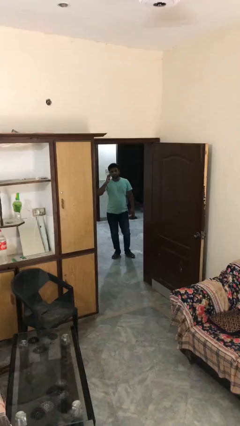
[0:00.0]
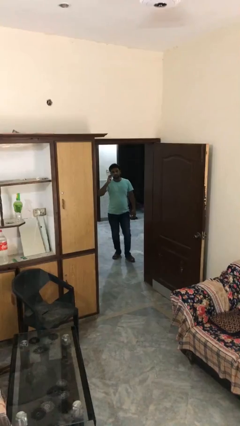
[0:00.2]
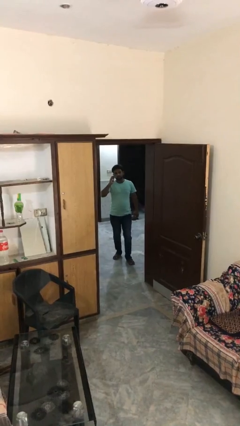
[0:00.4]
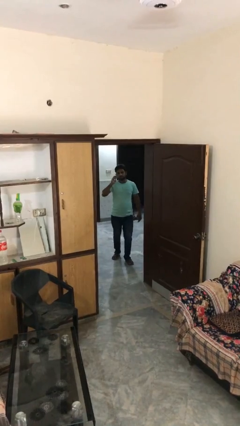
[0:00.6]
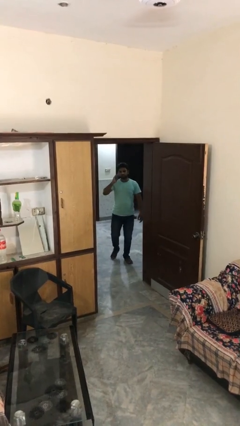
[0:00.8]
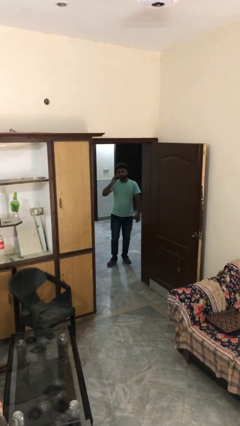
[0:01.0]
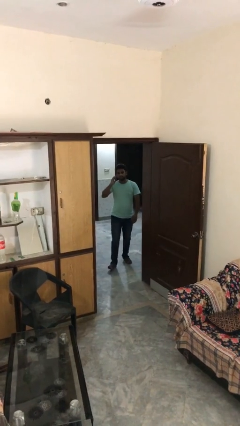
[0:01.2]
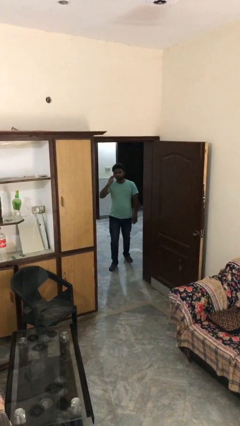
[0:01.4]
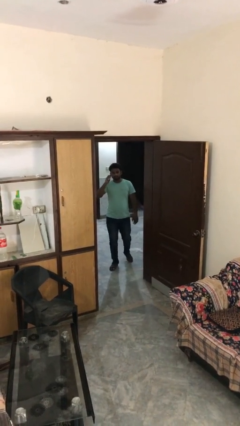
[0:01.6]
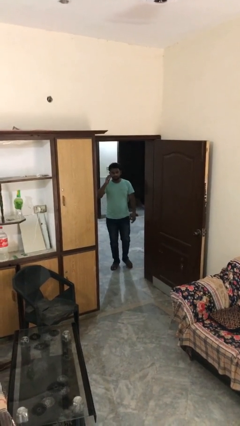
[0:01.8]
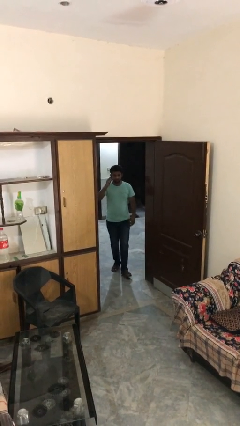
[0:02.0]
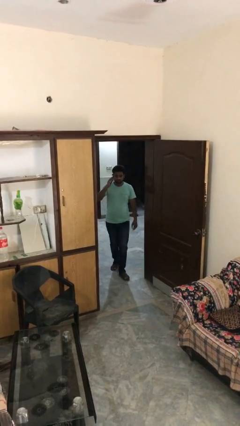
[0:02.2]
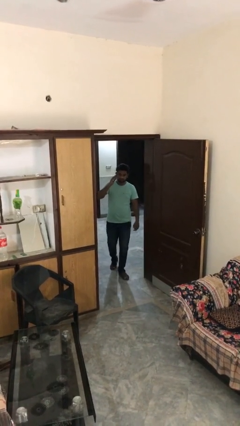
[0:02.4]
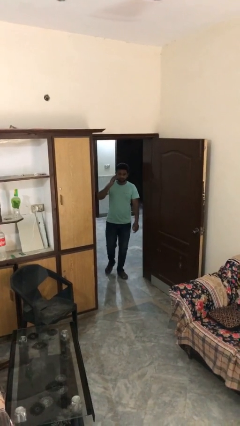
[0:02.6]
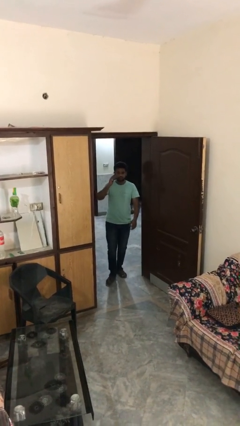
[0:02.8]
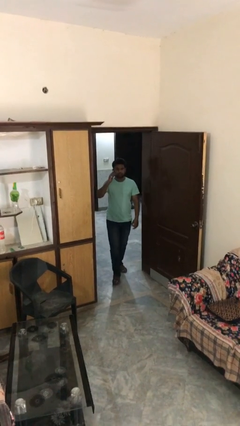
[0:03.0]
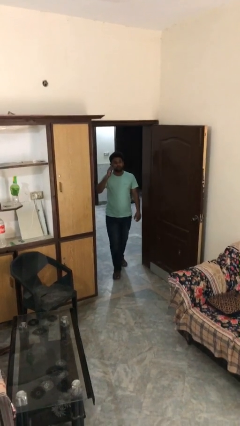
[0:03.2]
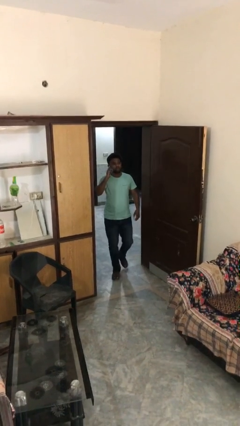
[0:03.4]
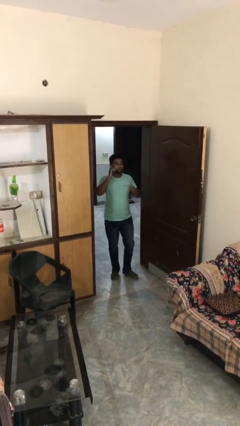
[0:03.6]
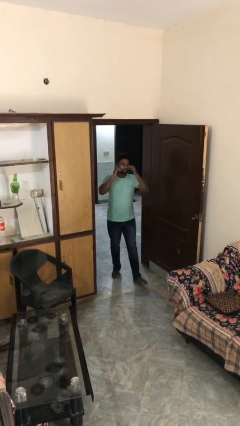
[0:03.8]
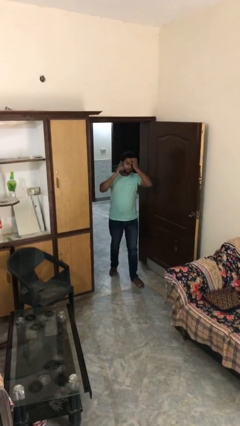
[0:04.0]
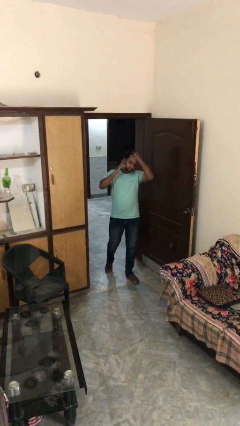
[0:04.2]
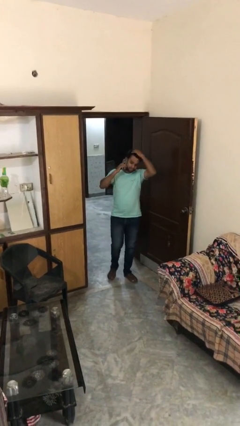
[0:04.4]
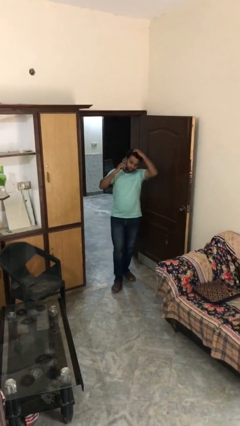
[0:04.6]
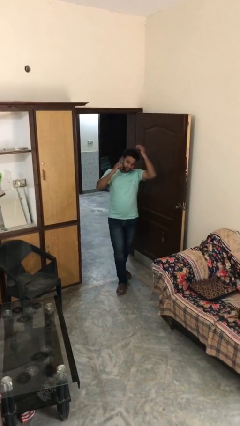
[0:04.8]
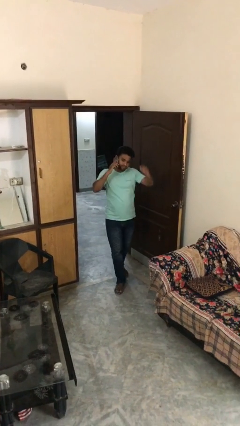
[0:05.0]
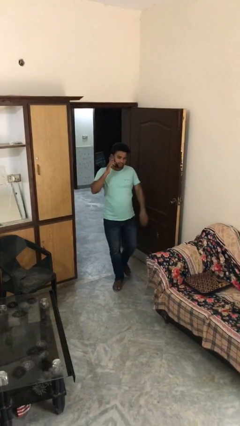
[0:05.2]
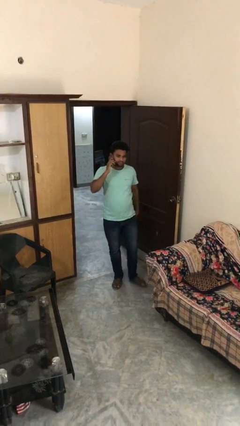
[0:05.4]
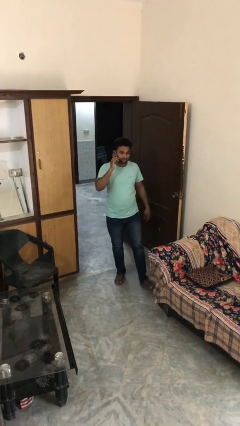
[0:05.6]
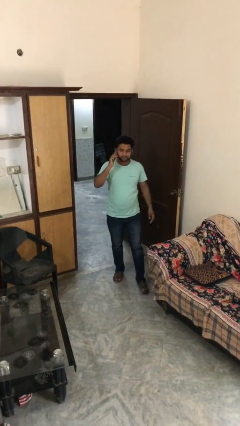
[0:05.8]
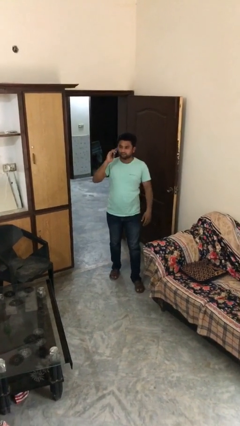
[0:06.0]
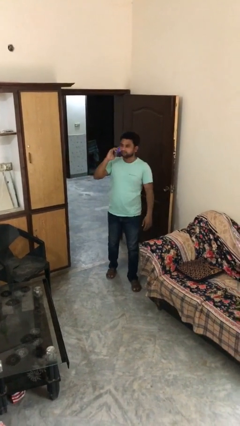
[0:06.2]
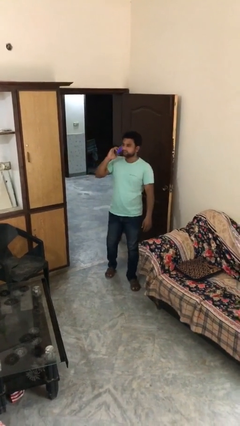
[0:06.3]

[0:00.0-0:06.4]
person enters scene through structure

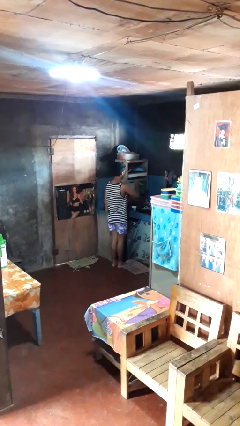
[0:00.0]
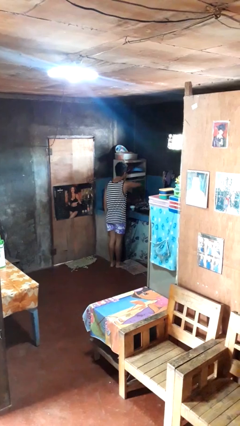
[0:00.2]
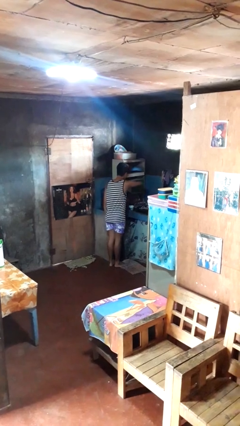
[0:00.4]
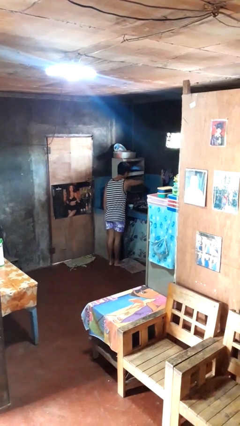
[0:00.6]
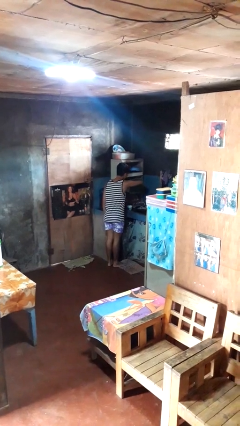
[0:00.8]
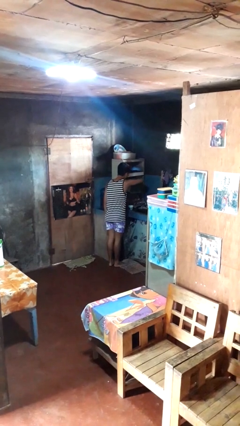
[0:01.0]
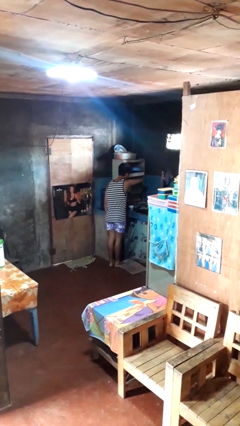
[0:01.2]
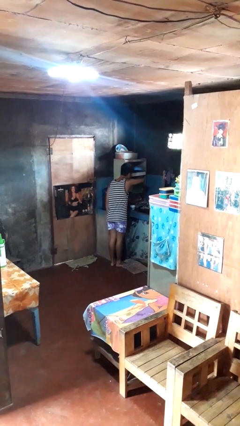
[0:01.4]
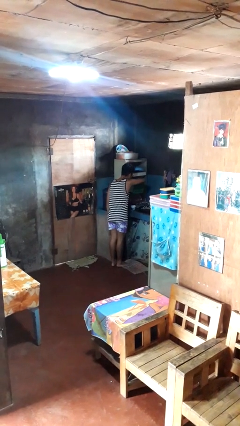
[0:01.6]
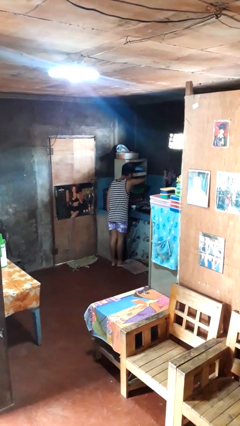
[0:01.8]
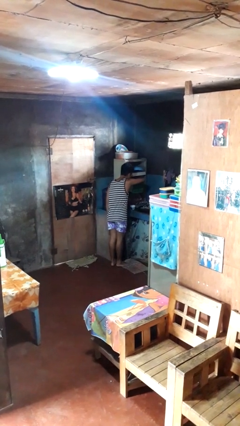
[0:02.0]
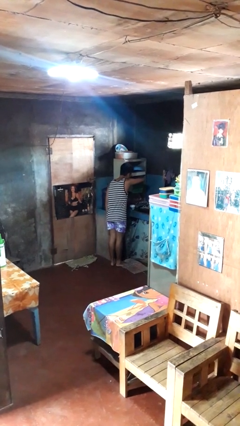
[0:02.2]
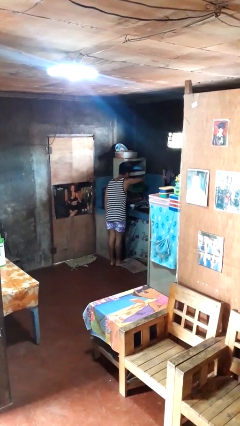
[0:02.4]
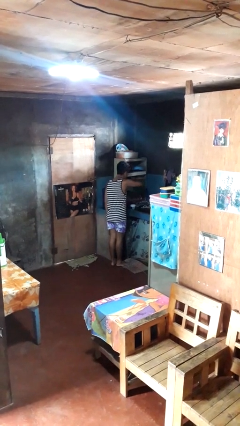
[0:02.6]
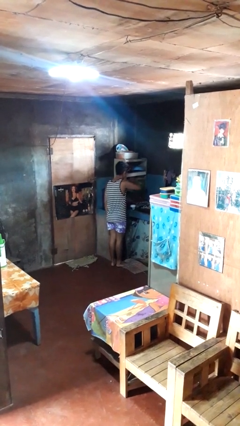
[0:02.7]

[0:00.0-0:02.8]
person searches in kitchen drawer

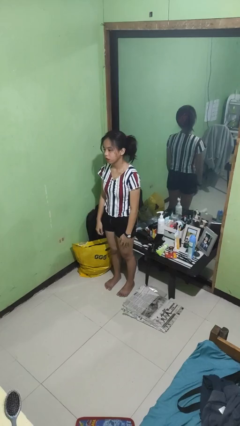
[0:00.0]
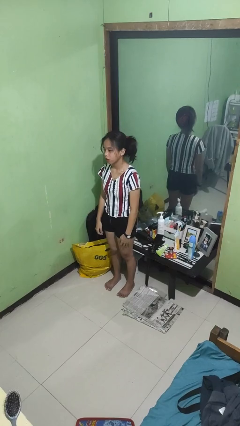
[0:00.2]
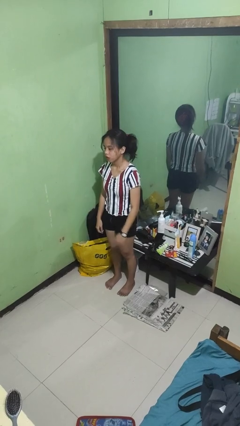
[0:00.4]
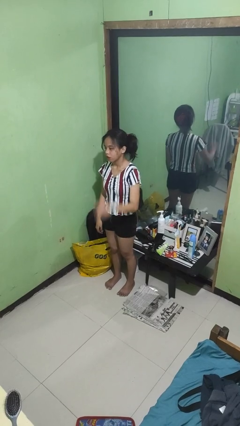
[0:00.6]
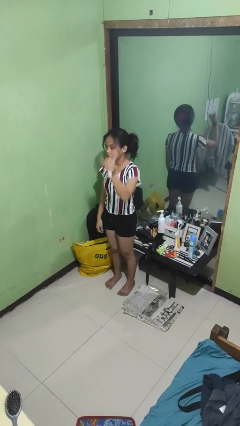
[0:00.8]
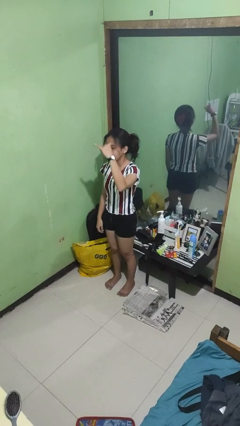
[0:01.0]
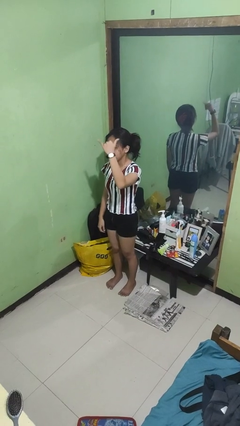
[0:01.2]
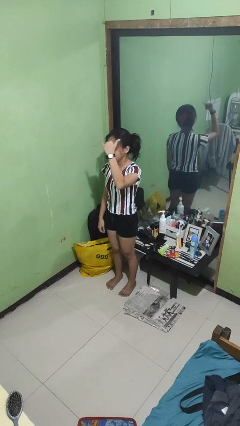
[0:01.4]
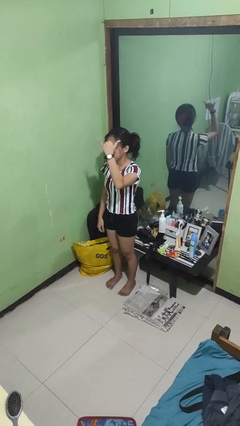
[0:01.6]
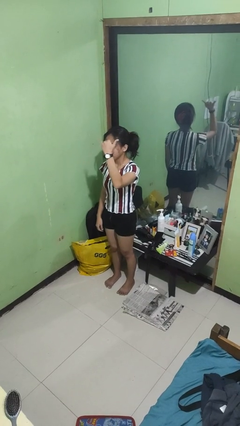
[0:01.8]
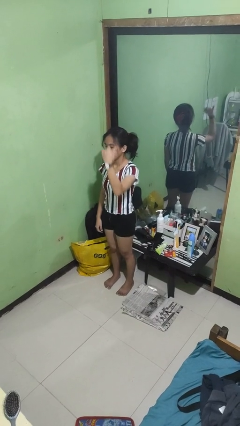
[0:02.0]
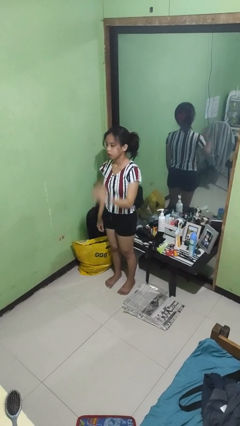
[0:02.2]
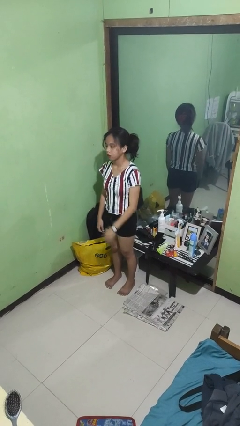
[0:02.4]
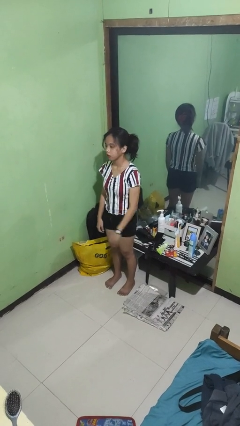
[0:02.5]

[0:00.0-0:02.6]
person gestures hang loose

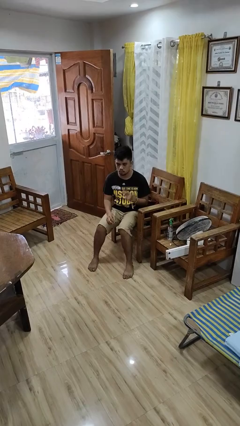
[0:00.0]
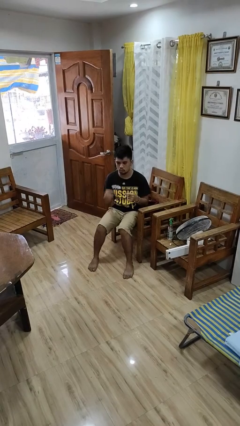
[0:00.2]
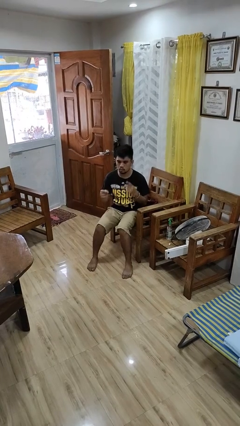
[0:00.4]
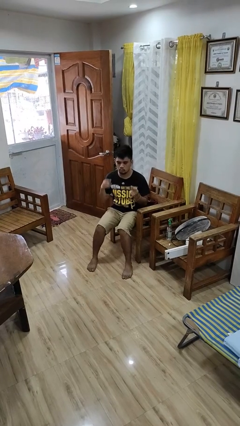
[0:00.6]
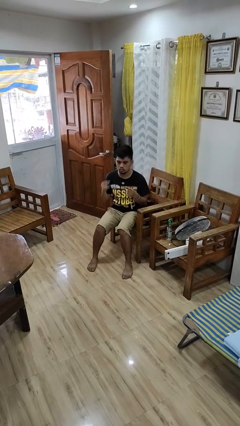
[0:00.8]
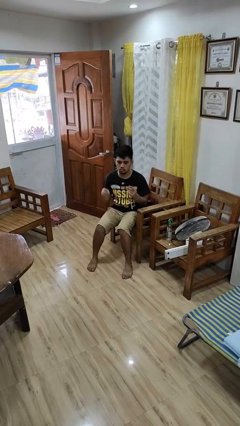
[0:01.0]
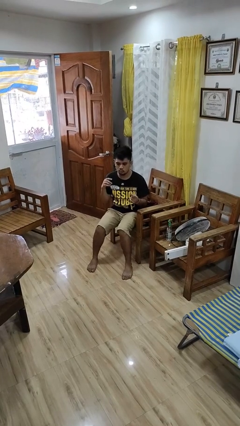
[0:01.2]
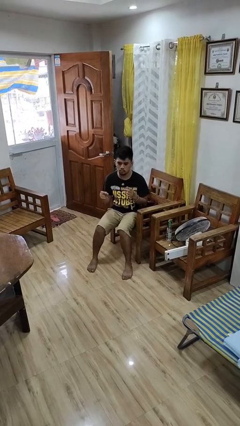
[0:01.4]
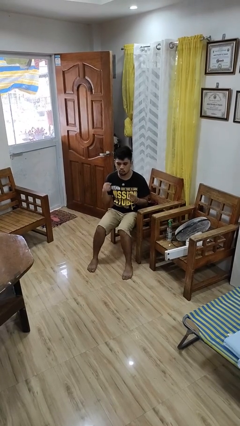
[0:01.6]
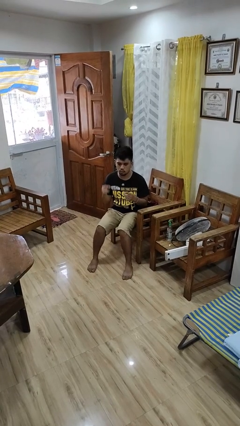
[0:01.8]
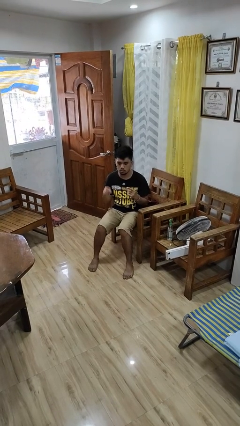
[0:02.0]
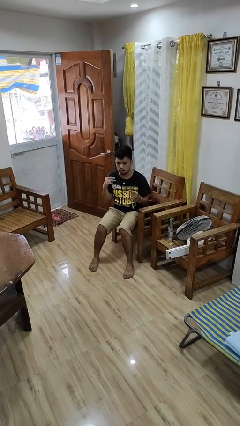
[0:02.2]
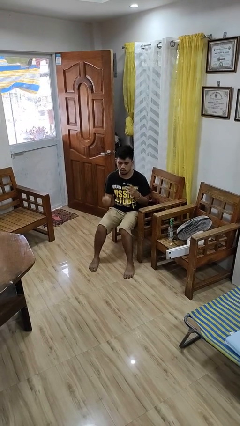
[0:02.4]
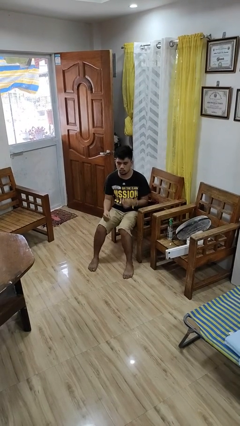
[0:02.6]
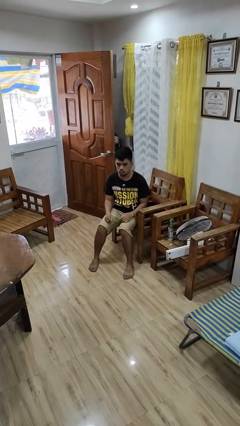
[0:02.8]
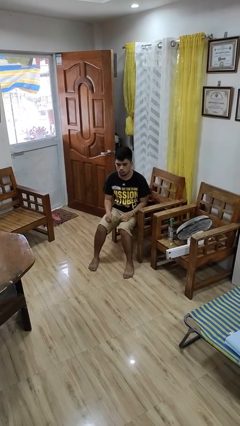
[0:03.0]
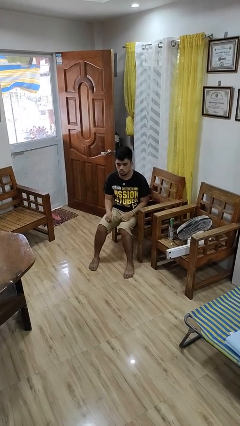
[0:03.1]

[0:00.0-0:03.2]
person snaps fingers

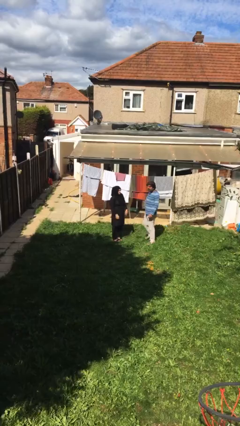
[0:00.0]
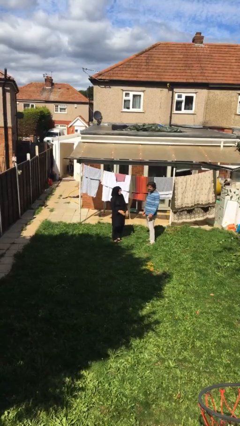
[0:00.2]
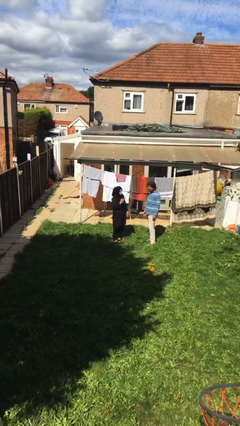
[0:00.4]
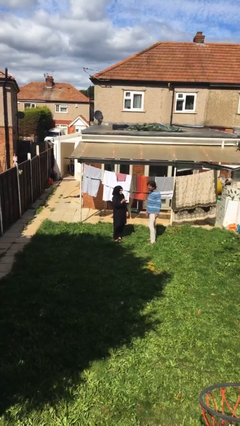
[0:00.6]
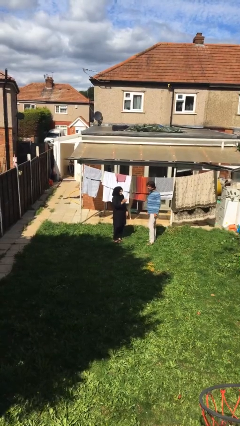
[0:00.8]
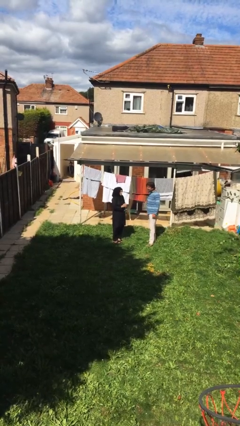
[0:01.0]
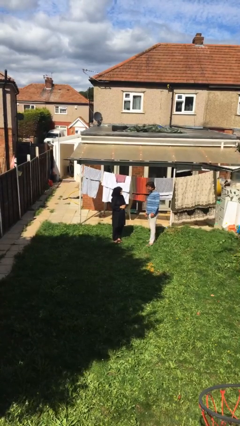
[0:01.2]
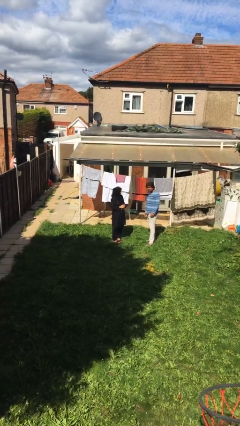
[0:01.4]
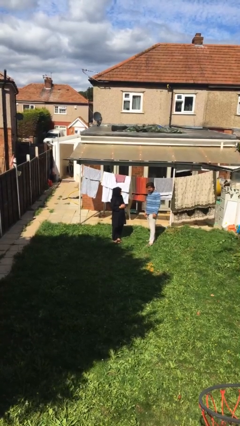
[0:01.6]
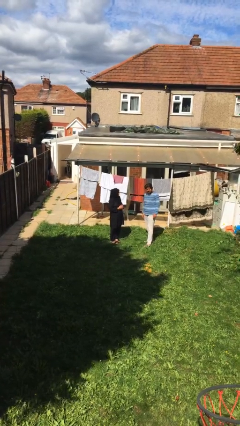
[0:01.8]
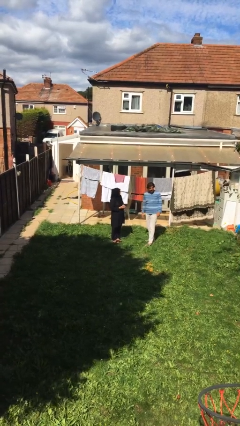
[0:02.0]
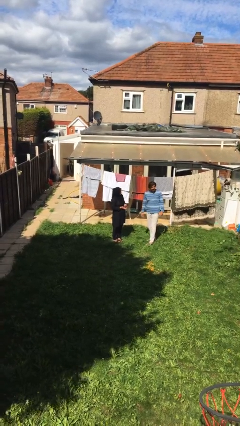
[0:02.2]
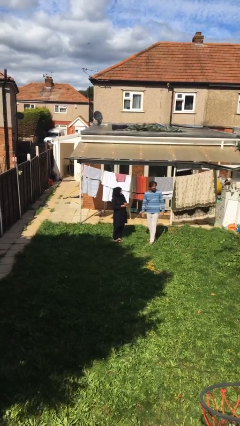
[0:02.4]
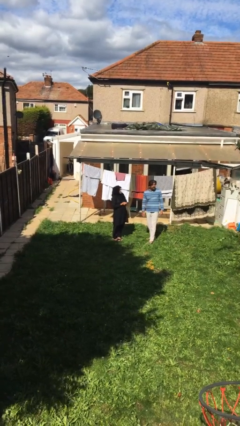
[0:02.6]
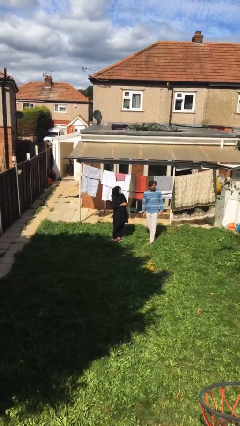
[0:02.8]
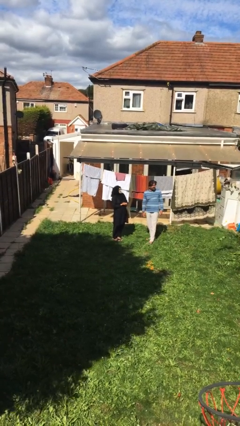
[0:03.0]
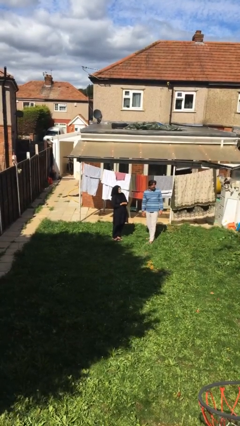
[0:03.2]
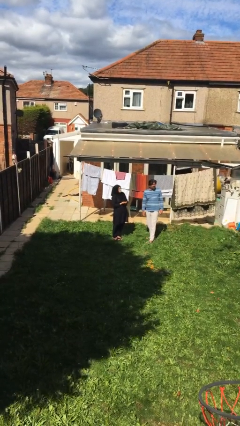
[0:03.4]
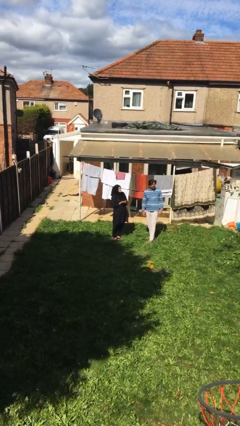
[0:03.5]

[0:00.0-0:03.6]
person talks to person
